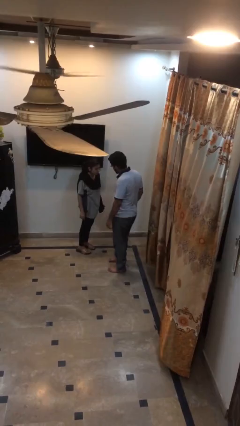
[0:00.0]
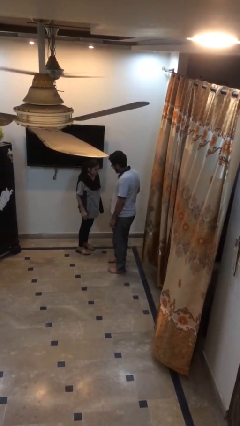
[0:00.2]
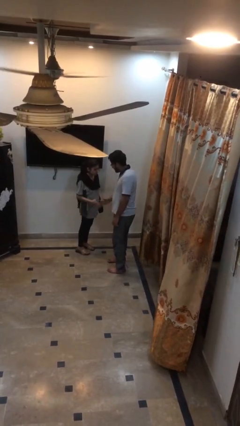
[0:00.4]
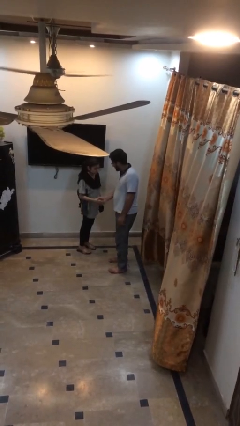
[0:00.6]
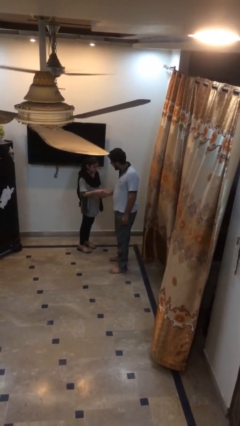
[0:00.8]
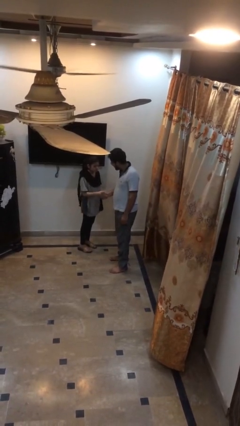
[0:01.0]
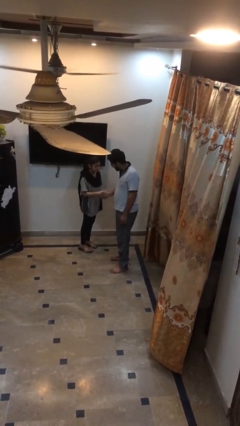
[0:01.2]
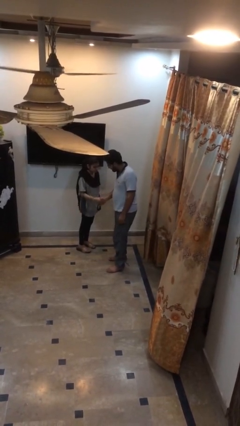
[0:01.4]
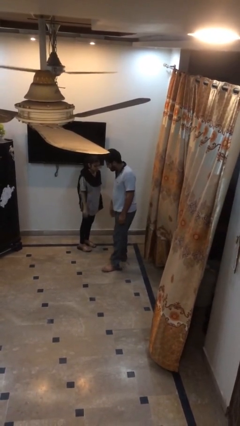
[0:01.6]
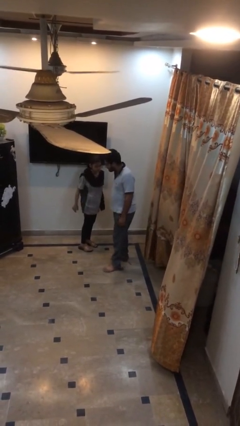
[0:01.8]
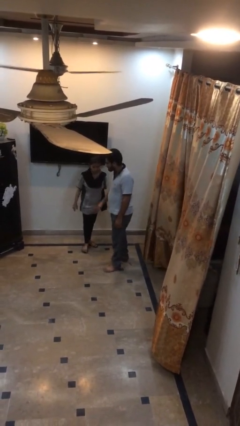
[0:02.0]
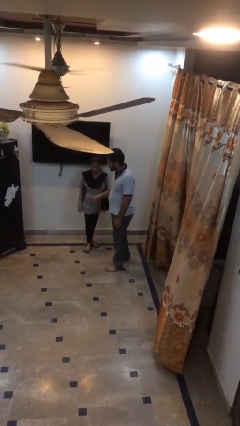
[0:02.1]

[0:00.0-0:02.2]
person shakes hand

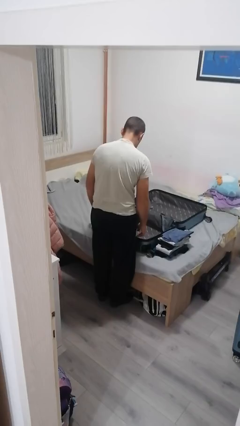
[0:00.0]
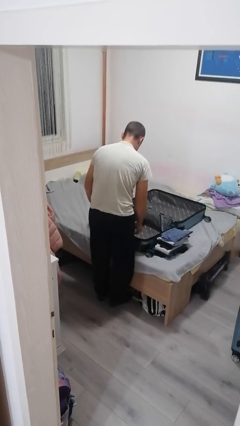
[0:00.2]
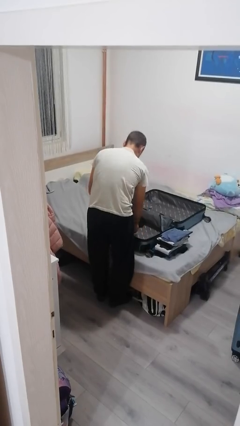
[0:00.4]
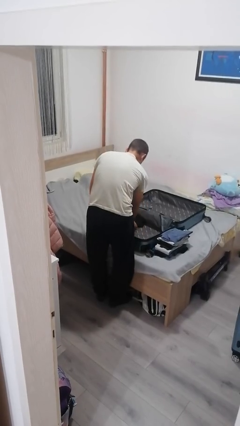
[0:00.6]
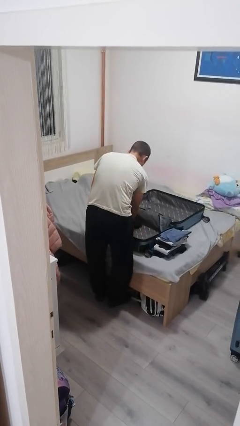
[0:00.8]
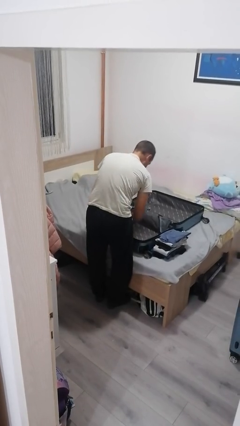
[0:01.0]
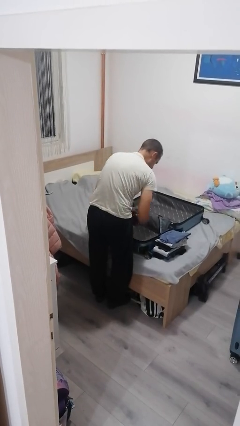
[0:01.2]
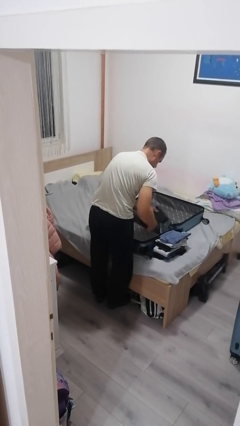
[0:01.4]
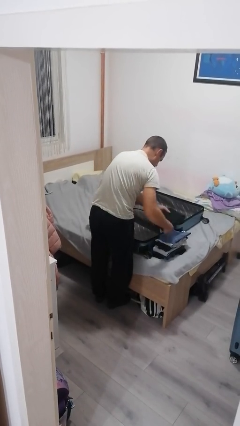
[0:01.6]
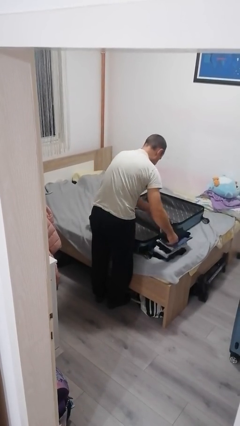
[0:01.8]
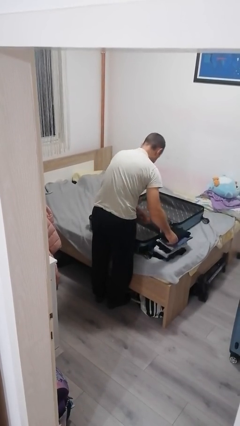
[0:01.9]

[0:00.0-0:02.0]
person unloads clothes from suitcase

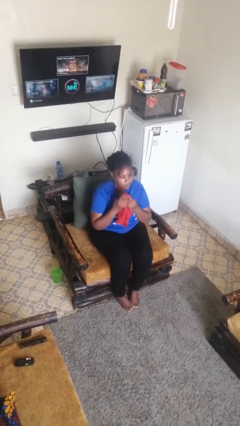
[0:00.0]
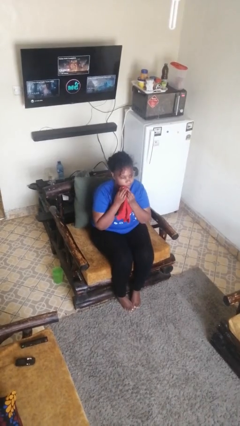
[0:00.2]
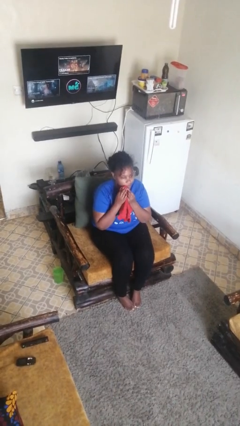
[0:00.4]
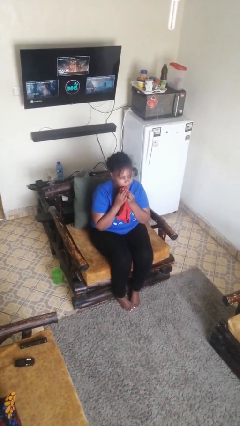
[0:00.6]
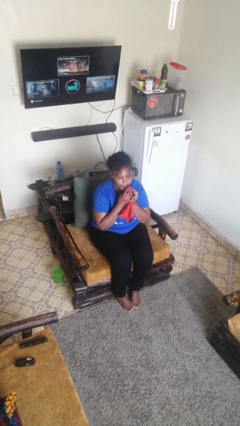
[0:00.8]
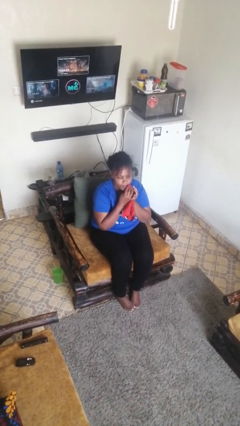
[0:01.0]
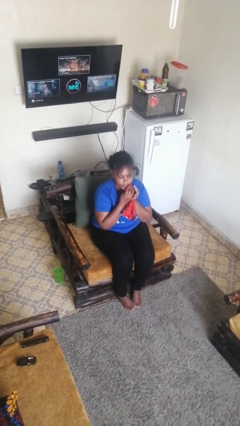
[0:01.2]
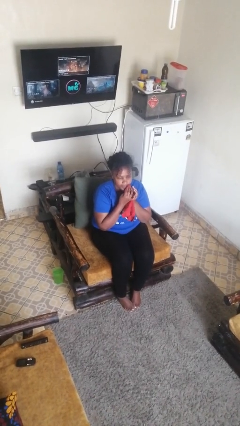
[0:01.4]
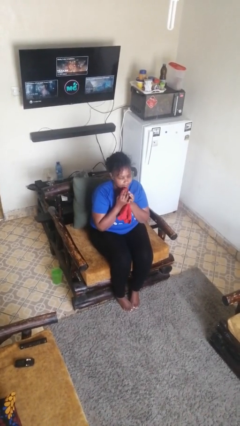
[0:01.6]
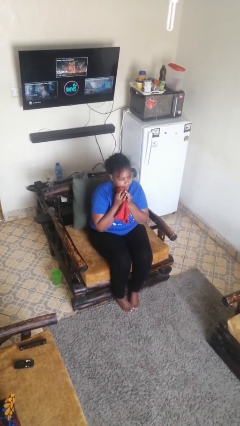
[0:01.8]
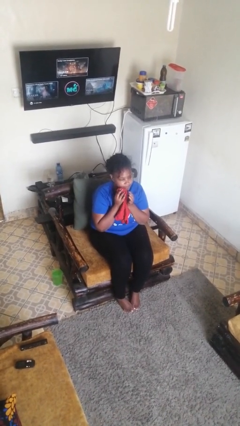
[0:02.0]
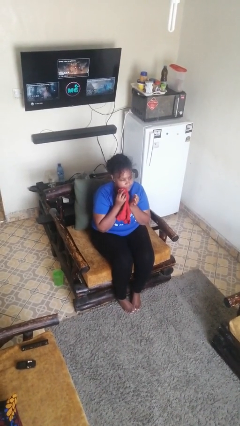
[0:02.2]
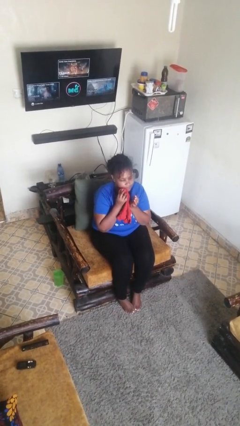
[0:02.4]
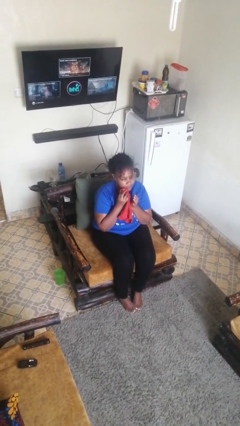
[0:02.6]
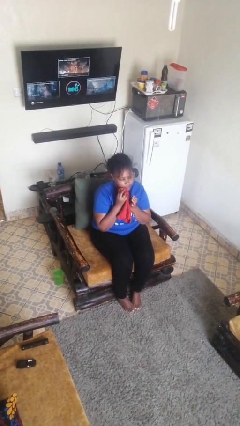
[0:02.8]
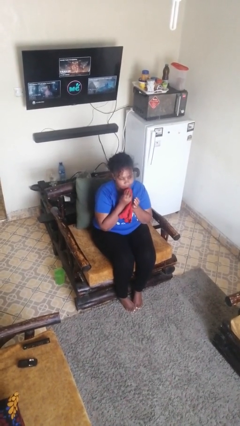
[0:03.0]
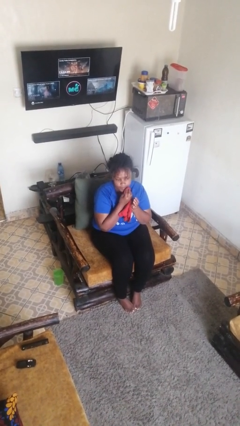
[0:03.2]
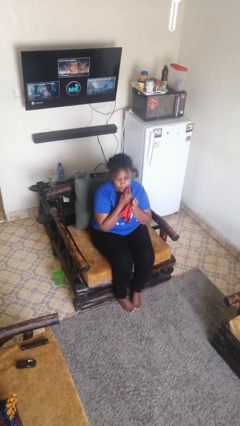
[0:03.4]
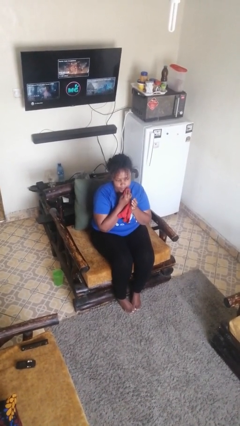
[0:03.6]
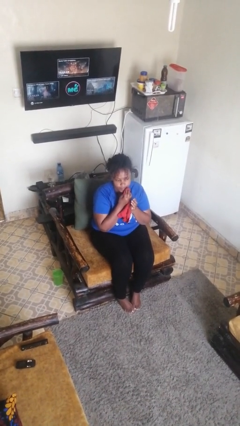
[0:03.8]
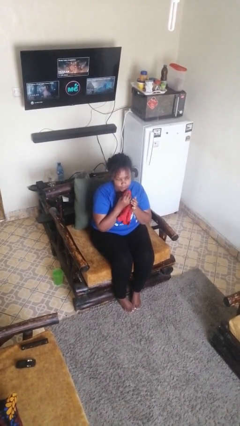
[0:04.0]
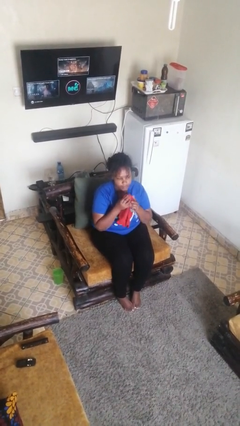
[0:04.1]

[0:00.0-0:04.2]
person wipes mouth with napkin

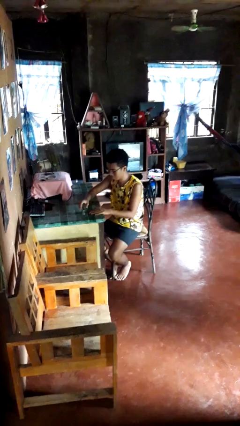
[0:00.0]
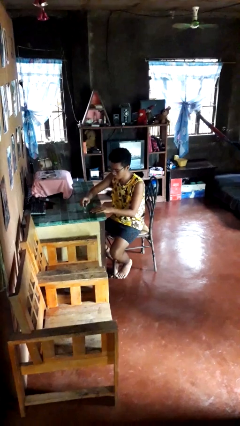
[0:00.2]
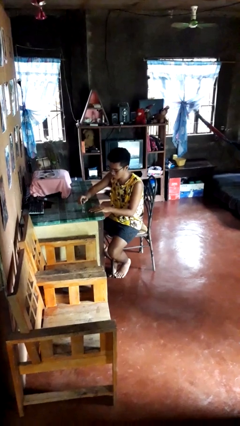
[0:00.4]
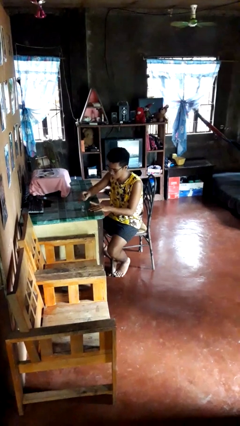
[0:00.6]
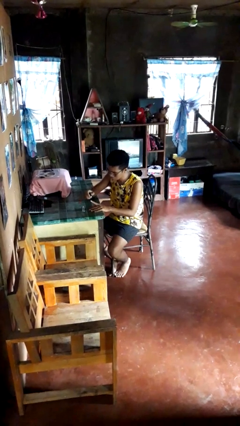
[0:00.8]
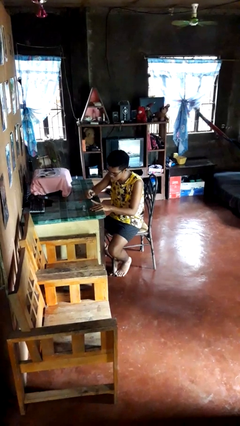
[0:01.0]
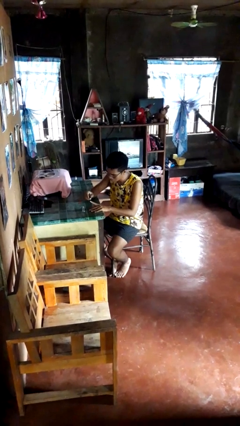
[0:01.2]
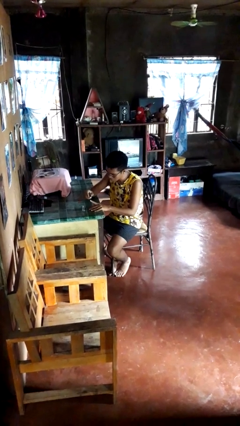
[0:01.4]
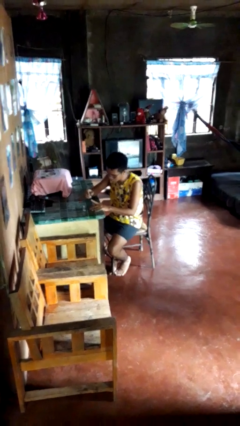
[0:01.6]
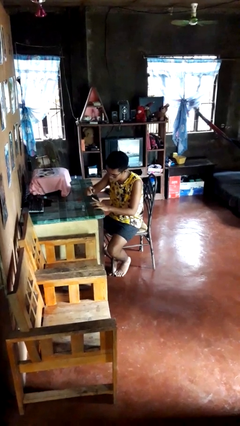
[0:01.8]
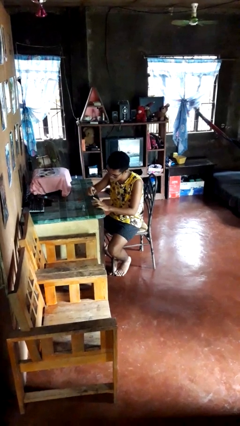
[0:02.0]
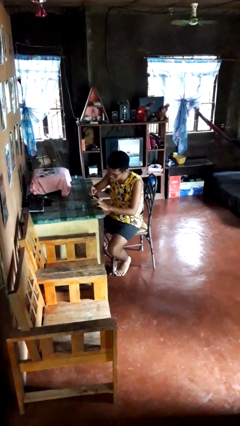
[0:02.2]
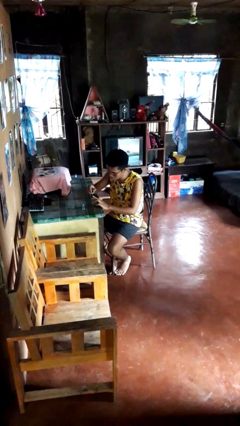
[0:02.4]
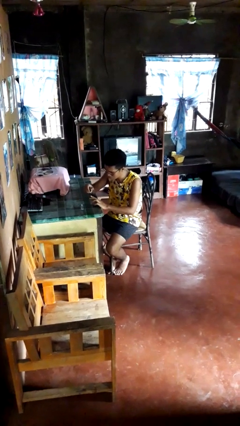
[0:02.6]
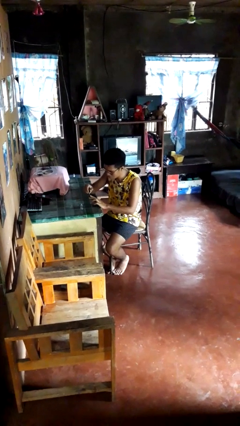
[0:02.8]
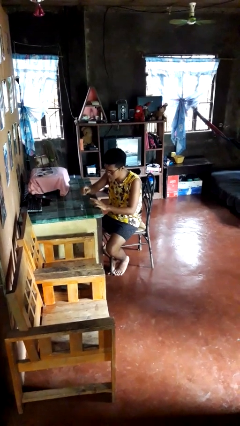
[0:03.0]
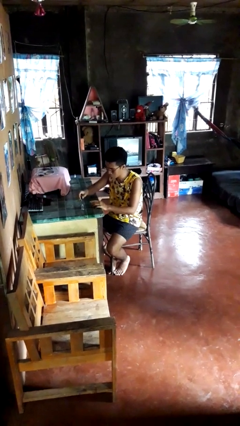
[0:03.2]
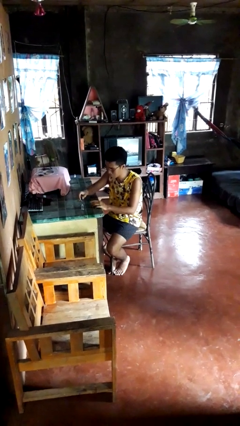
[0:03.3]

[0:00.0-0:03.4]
person paints fingernails

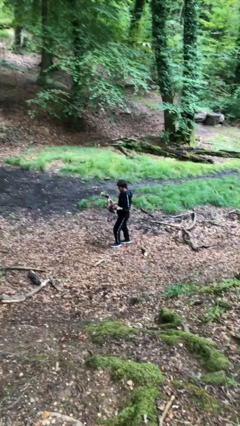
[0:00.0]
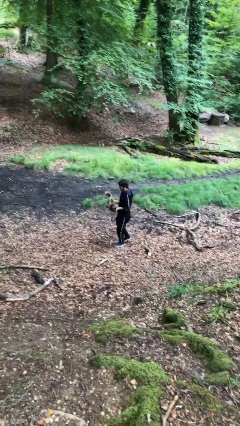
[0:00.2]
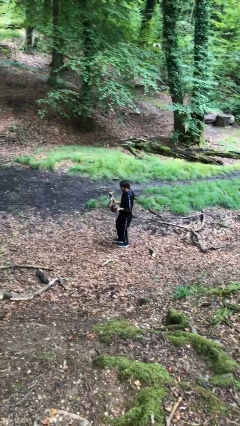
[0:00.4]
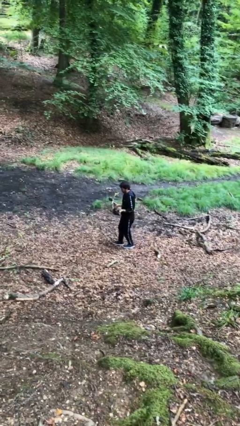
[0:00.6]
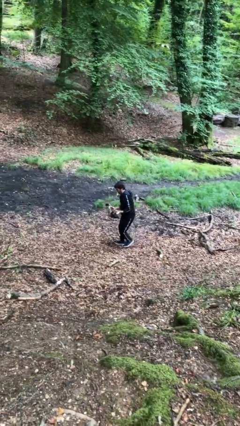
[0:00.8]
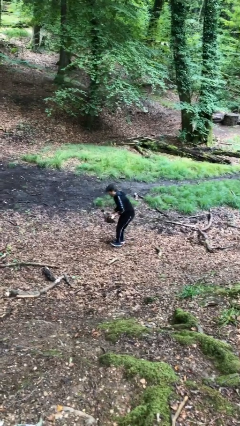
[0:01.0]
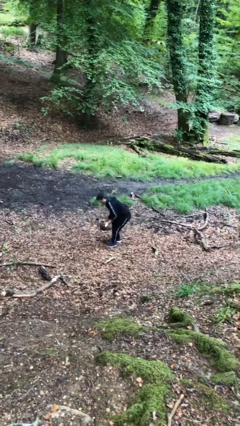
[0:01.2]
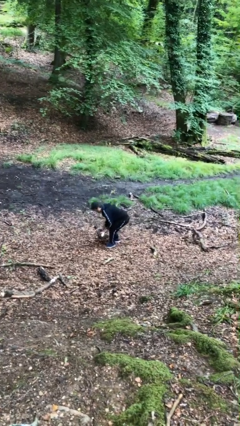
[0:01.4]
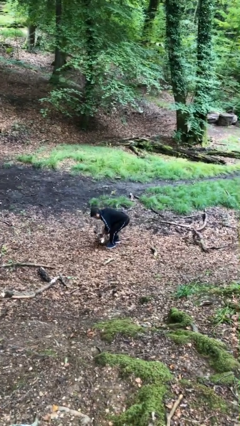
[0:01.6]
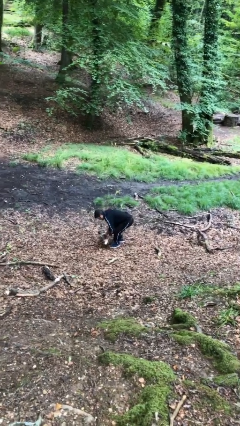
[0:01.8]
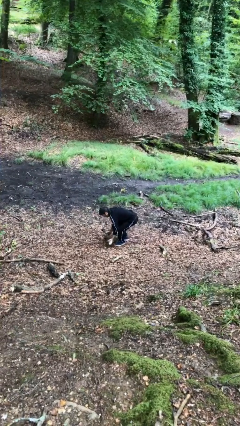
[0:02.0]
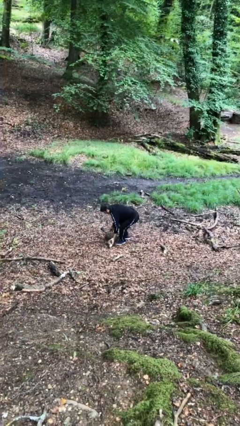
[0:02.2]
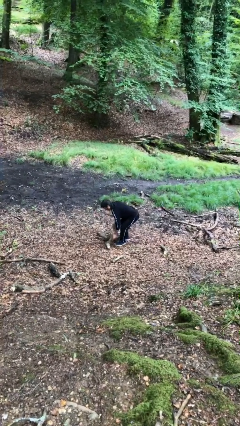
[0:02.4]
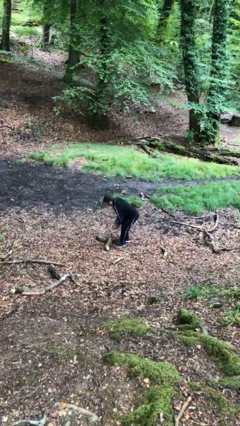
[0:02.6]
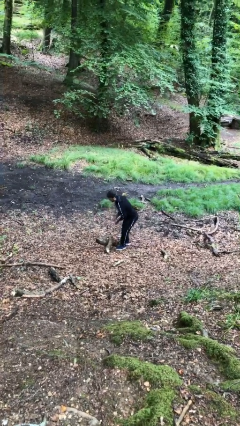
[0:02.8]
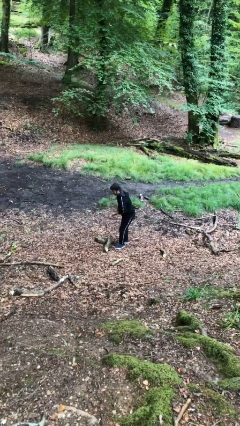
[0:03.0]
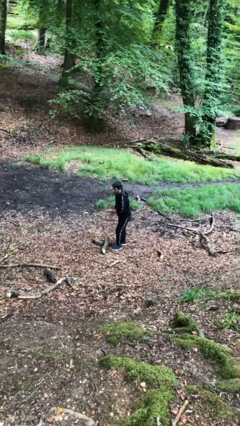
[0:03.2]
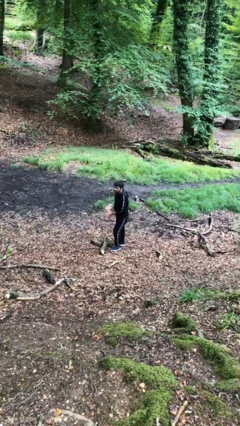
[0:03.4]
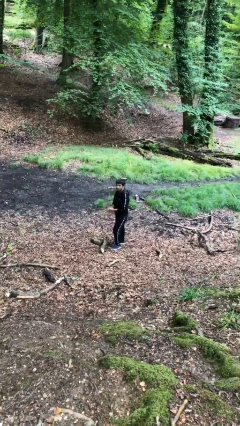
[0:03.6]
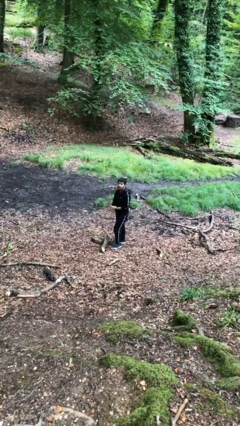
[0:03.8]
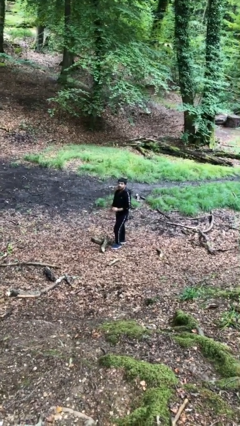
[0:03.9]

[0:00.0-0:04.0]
person puts down object on floor

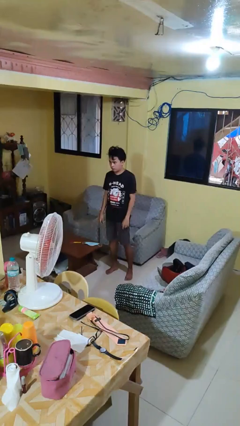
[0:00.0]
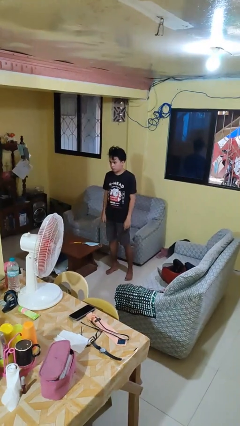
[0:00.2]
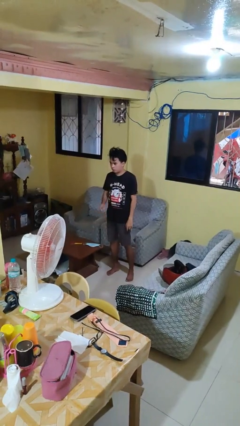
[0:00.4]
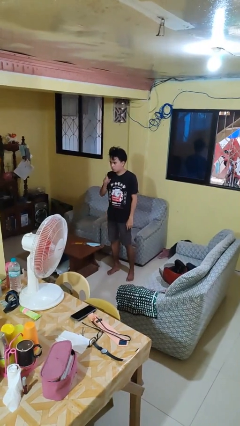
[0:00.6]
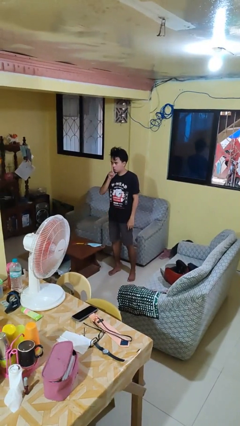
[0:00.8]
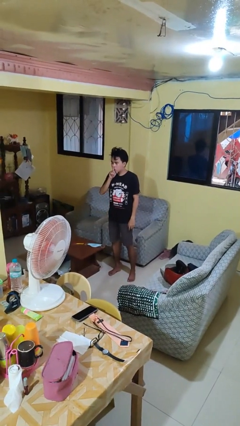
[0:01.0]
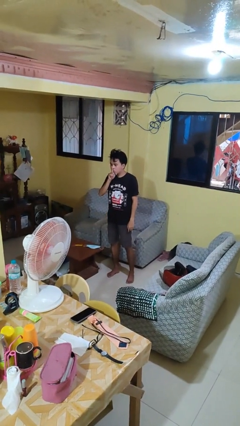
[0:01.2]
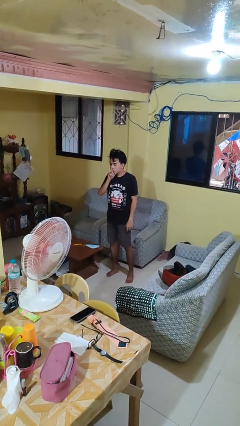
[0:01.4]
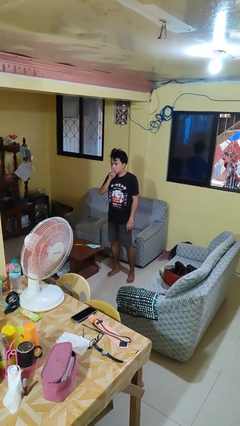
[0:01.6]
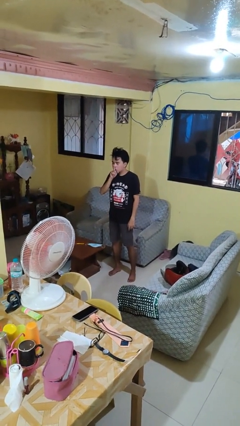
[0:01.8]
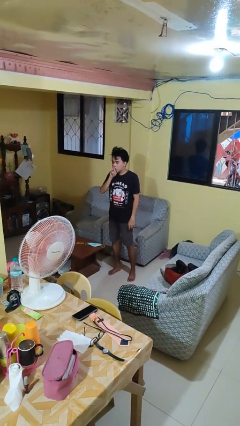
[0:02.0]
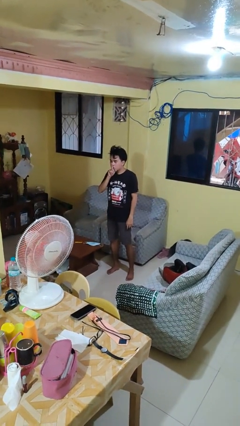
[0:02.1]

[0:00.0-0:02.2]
person gestures be quiet
